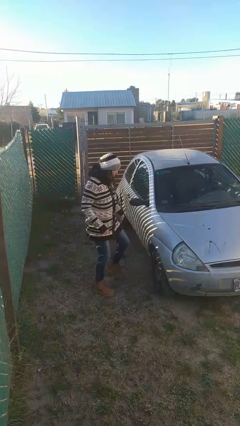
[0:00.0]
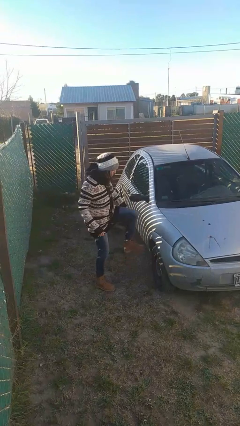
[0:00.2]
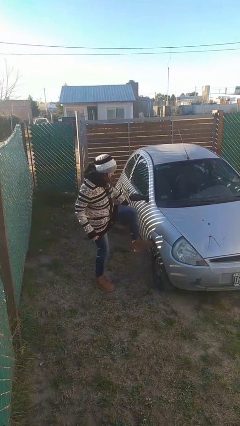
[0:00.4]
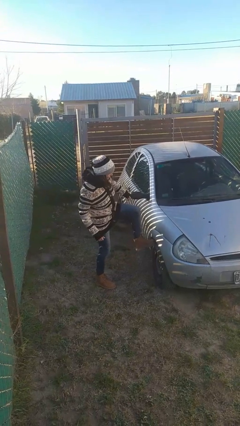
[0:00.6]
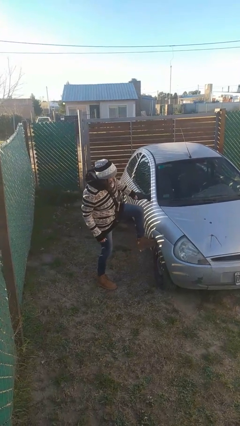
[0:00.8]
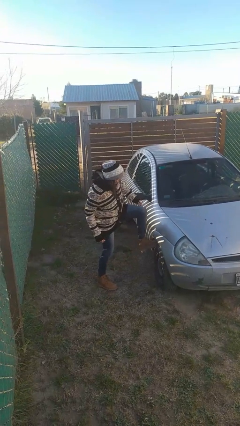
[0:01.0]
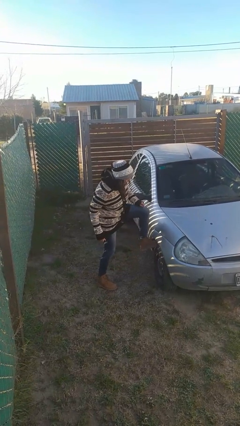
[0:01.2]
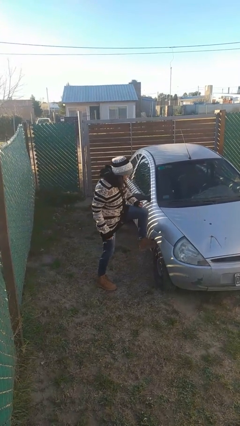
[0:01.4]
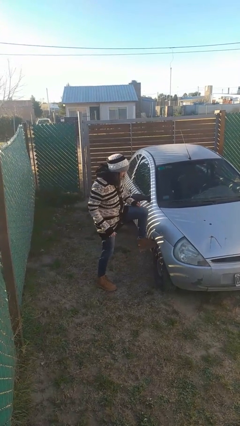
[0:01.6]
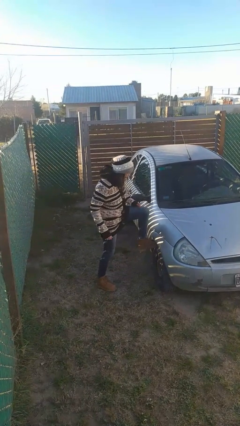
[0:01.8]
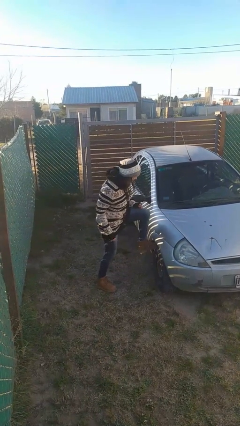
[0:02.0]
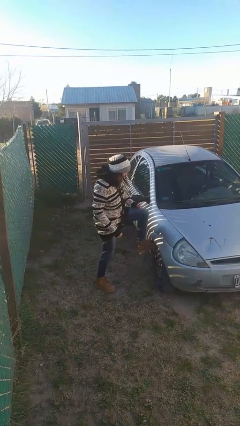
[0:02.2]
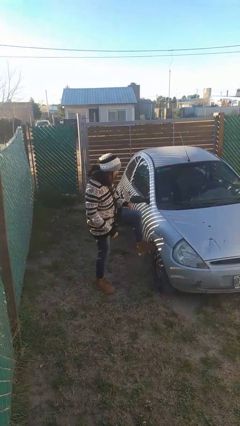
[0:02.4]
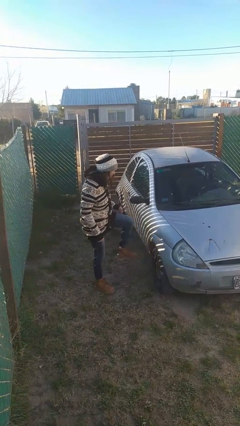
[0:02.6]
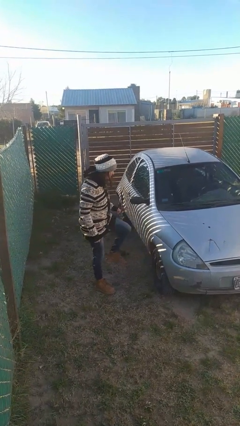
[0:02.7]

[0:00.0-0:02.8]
person kicks car tires

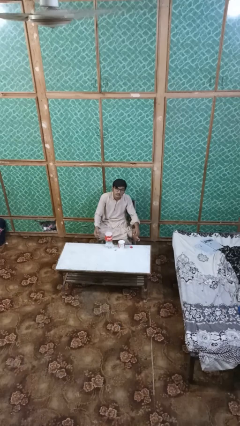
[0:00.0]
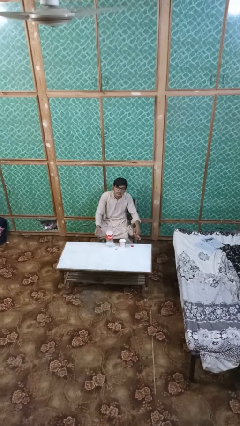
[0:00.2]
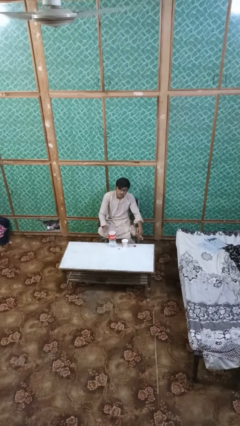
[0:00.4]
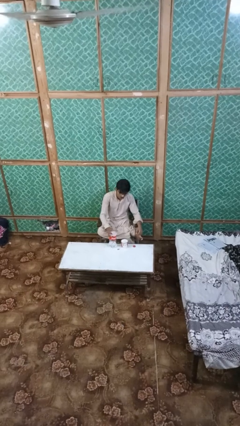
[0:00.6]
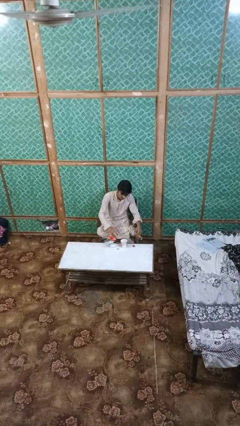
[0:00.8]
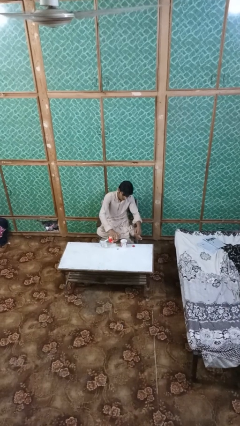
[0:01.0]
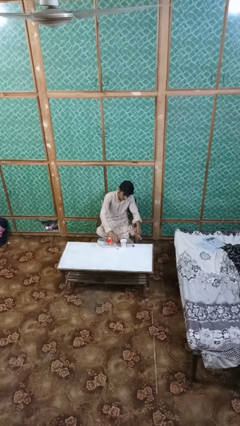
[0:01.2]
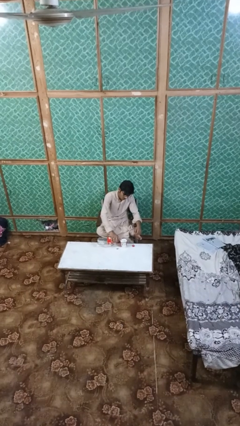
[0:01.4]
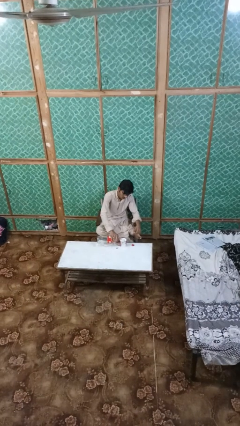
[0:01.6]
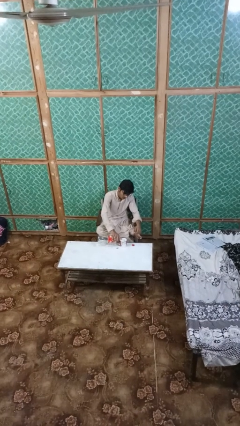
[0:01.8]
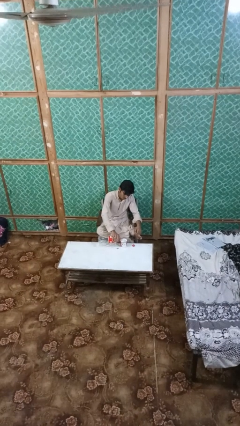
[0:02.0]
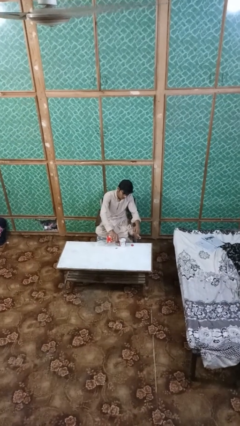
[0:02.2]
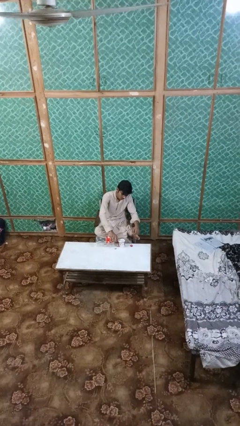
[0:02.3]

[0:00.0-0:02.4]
person pours liquid into cup

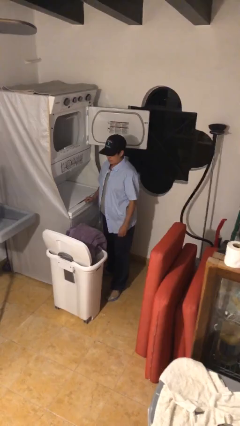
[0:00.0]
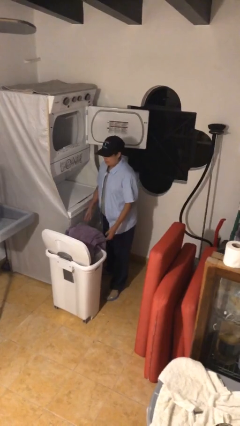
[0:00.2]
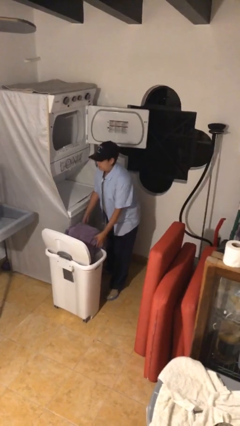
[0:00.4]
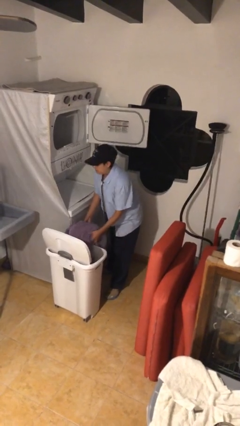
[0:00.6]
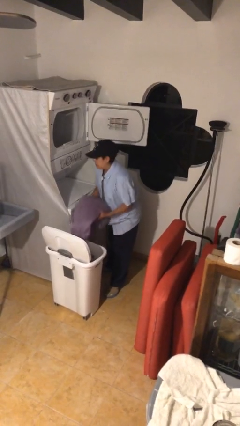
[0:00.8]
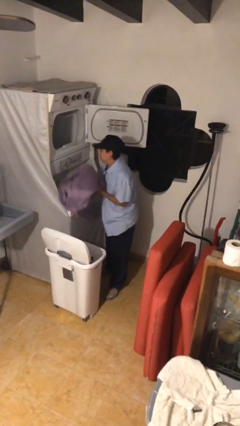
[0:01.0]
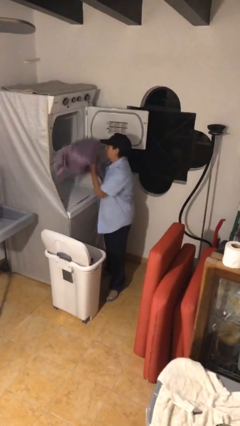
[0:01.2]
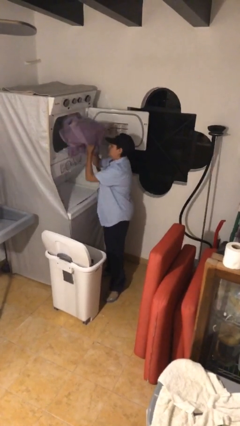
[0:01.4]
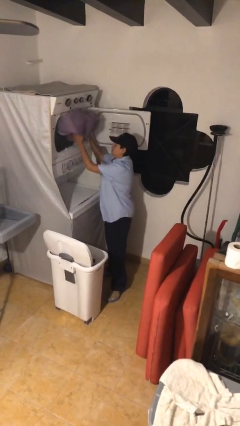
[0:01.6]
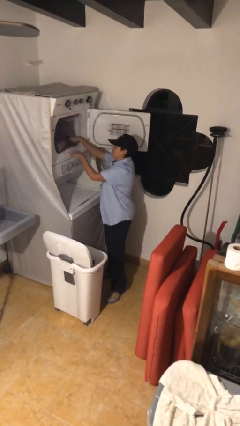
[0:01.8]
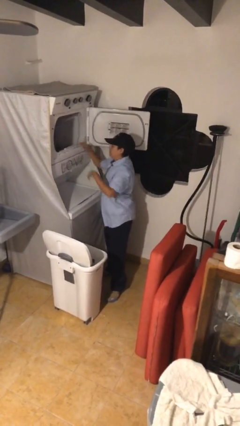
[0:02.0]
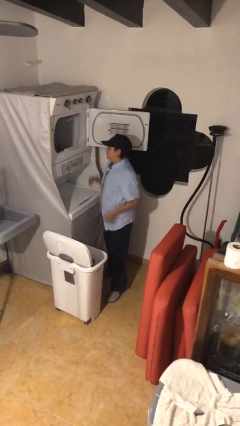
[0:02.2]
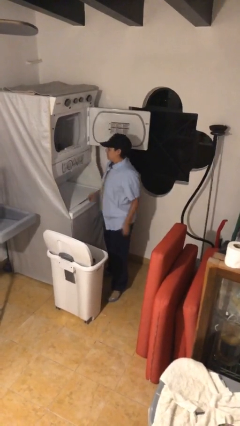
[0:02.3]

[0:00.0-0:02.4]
person loads dryer

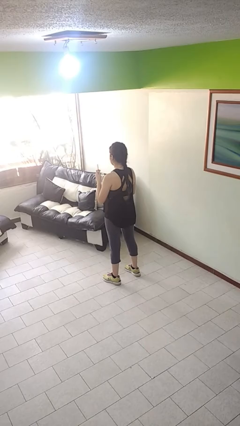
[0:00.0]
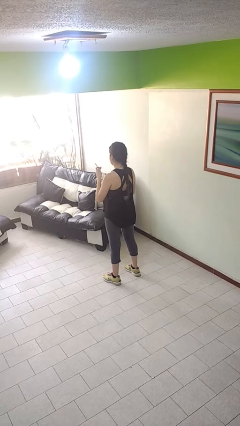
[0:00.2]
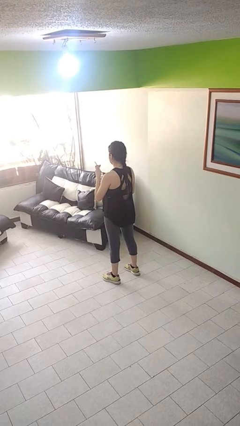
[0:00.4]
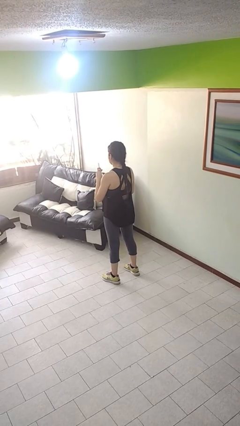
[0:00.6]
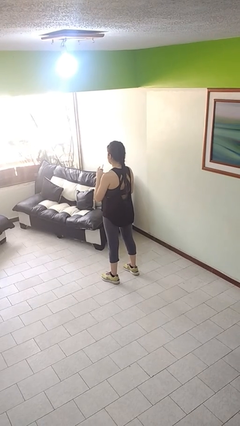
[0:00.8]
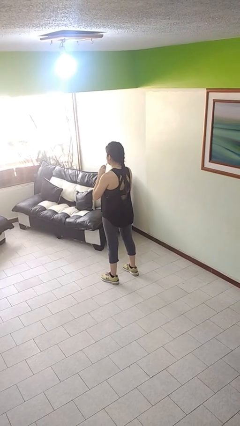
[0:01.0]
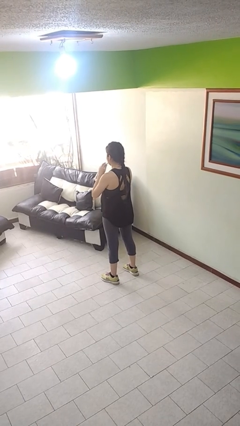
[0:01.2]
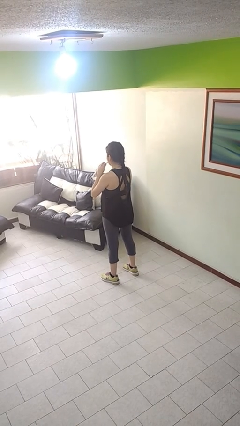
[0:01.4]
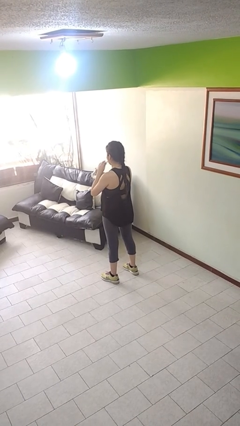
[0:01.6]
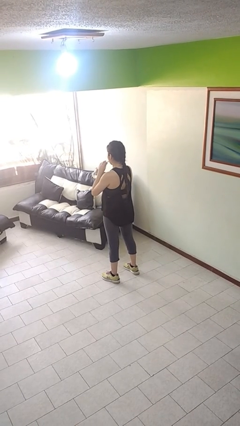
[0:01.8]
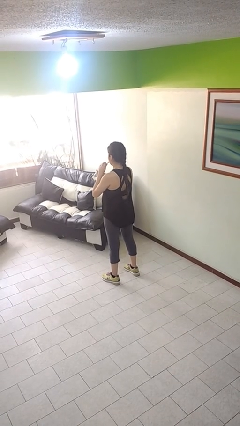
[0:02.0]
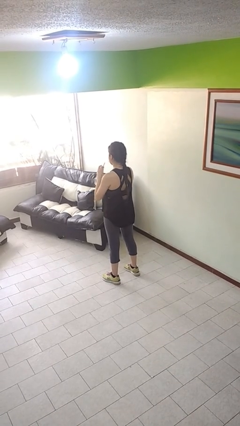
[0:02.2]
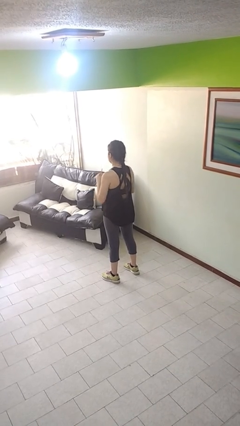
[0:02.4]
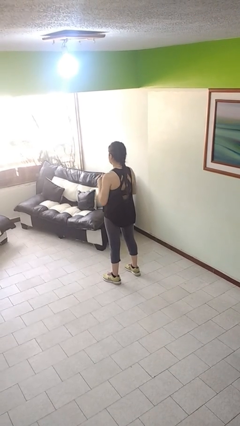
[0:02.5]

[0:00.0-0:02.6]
person drinks from straw

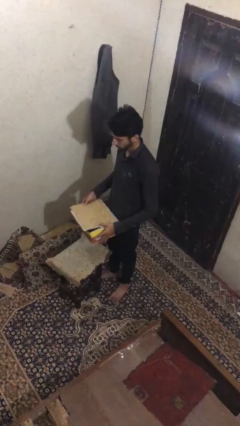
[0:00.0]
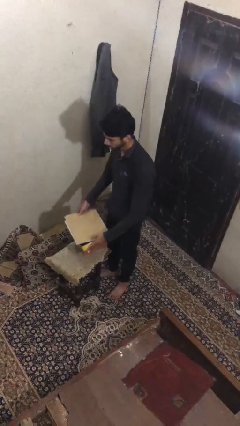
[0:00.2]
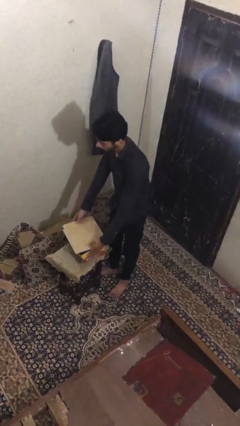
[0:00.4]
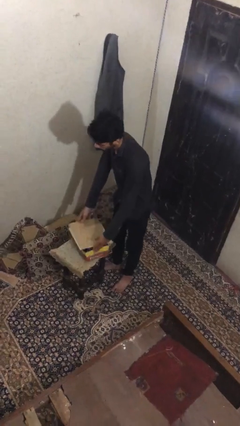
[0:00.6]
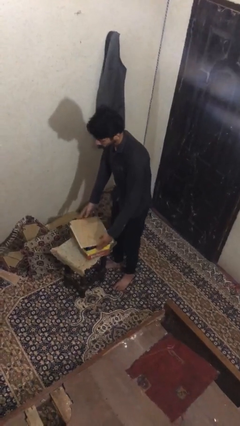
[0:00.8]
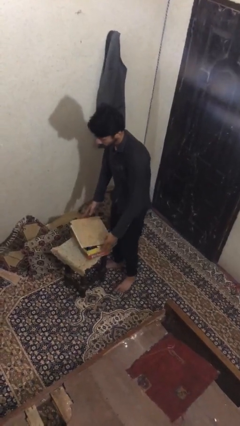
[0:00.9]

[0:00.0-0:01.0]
person puts down object on table

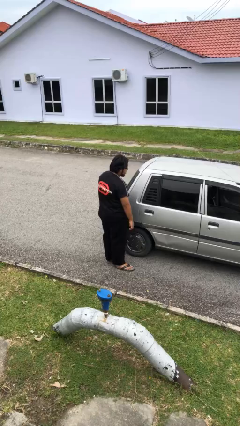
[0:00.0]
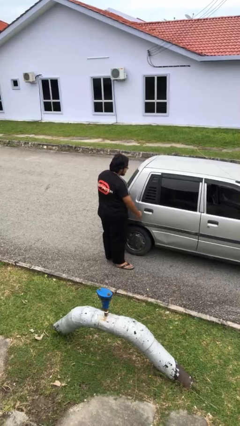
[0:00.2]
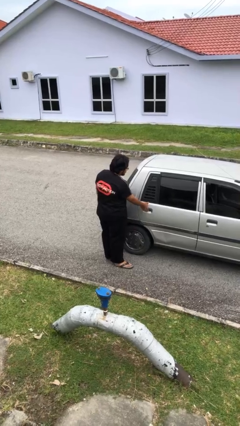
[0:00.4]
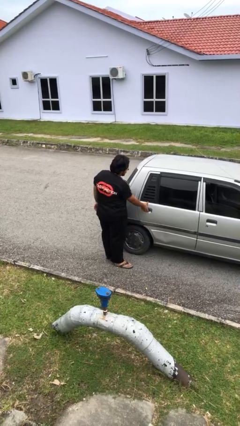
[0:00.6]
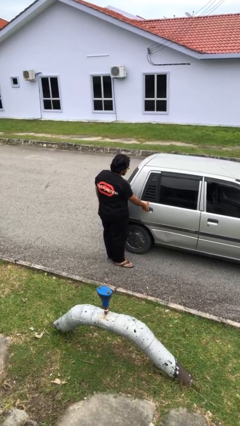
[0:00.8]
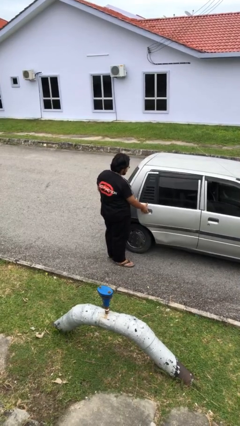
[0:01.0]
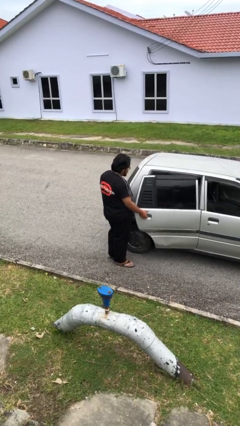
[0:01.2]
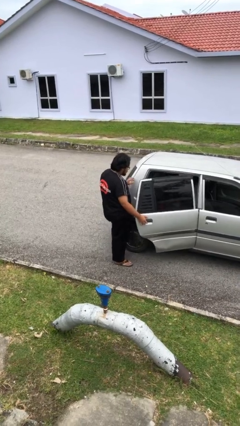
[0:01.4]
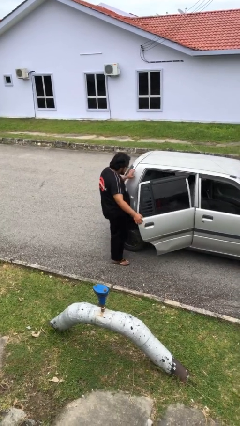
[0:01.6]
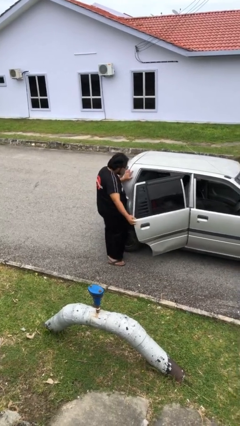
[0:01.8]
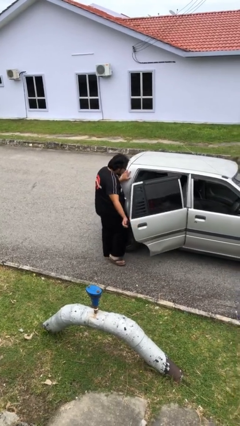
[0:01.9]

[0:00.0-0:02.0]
person opens car door

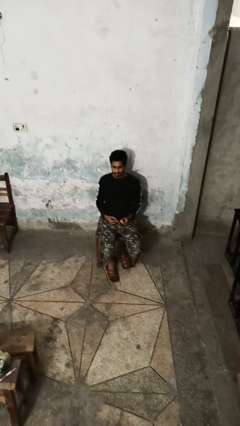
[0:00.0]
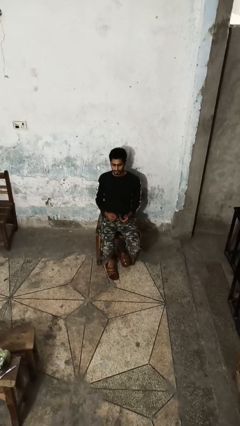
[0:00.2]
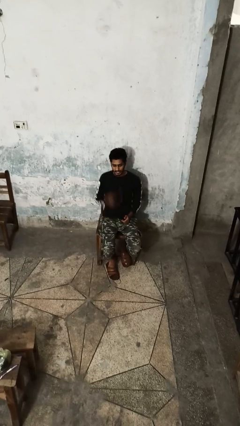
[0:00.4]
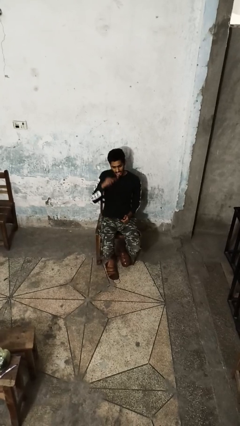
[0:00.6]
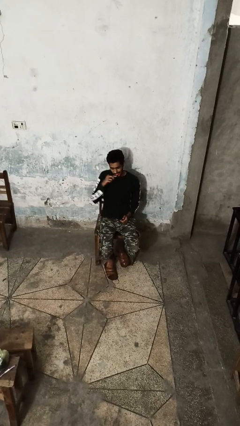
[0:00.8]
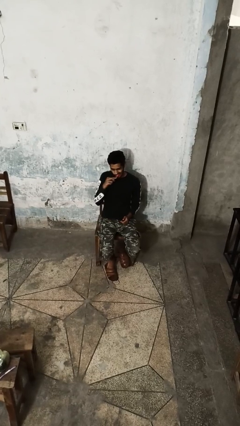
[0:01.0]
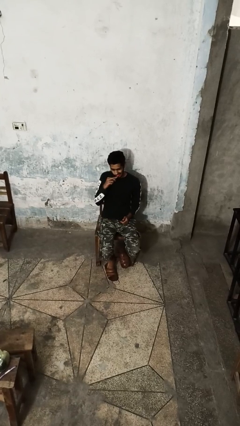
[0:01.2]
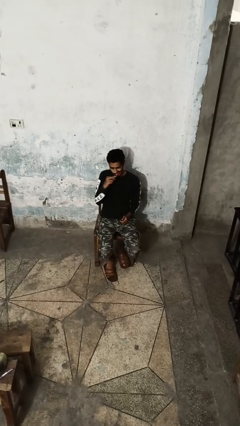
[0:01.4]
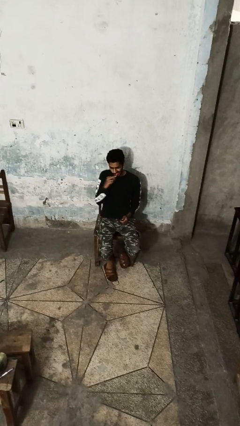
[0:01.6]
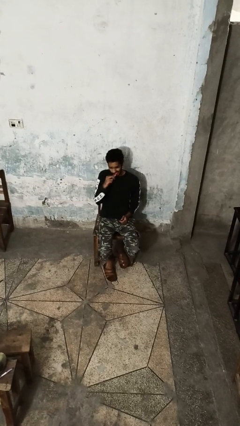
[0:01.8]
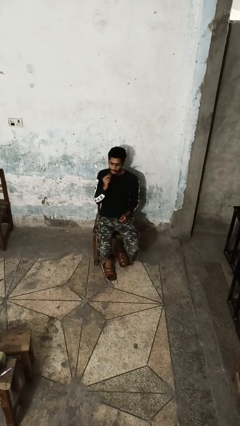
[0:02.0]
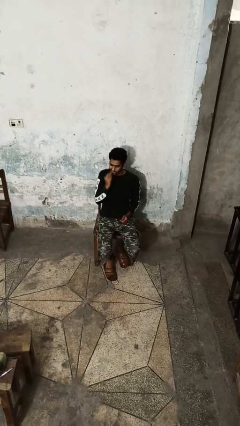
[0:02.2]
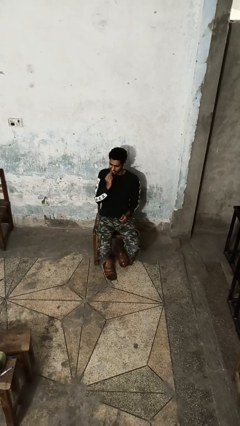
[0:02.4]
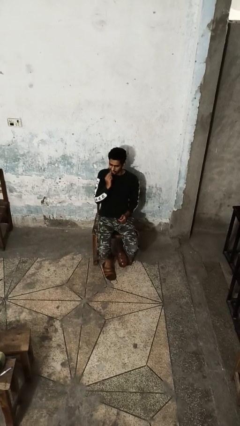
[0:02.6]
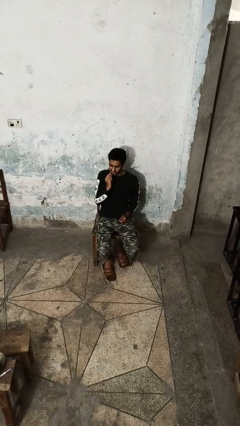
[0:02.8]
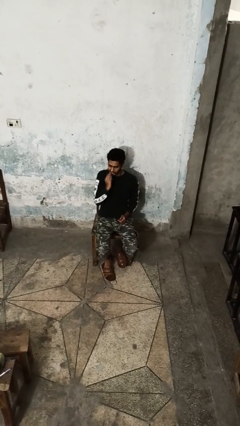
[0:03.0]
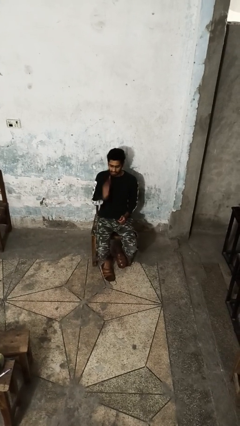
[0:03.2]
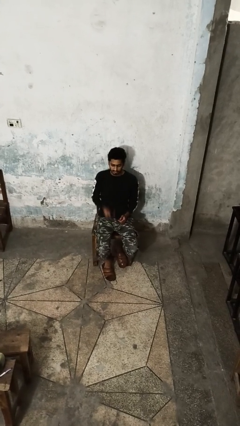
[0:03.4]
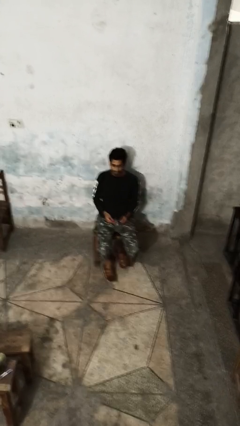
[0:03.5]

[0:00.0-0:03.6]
person brushes teeth

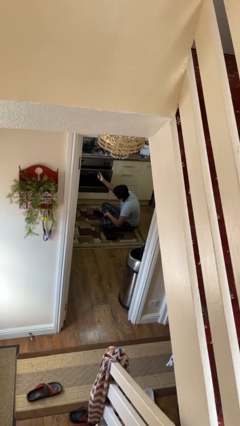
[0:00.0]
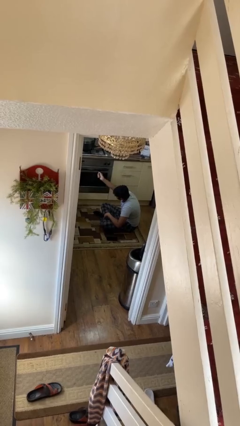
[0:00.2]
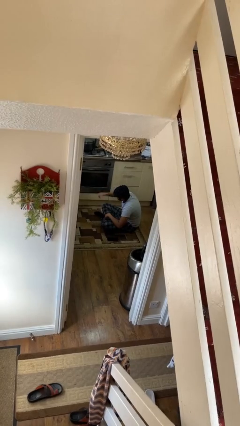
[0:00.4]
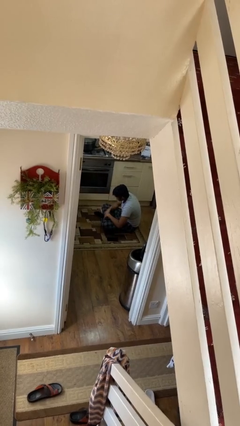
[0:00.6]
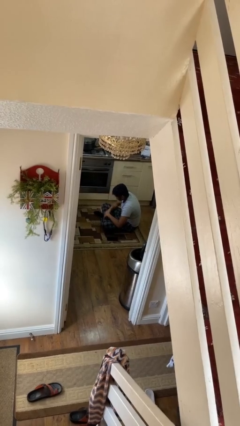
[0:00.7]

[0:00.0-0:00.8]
person closes oven door
